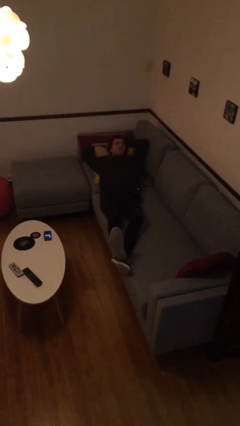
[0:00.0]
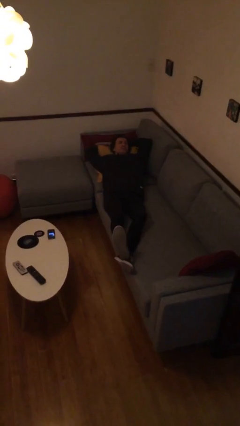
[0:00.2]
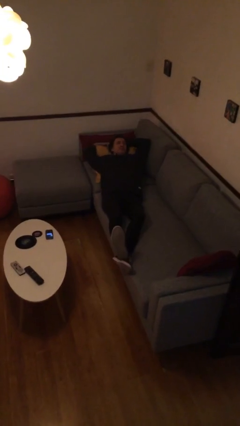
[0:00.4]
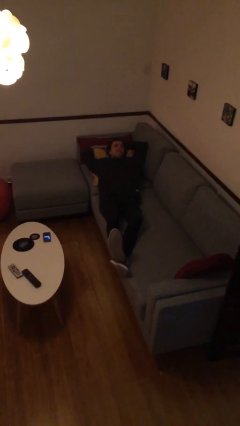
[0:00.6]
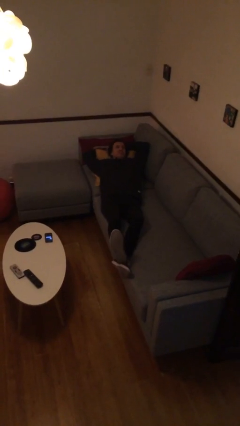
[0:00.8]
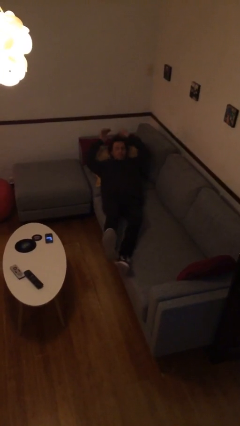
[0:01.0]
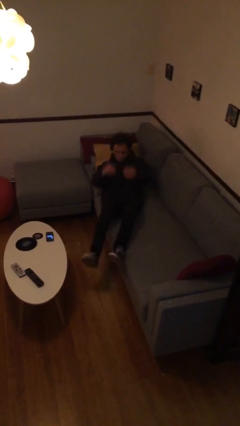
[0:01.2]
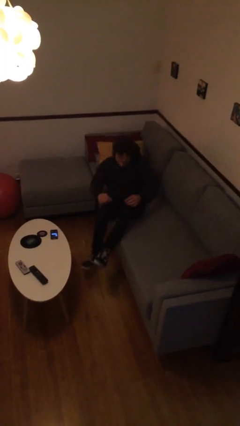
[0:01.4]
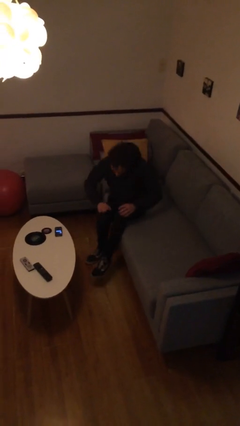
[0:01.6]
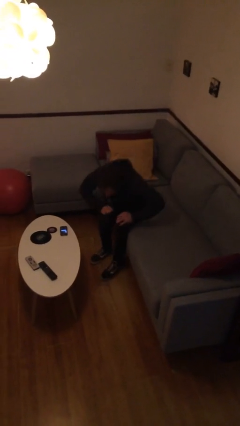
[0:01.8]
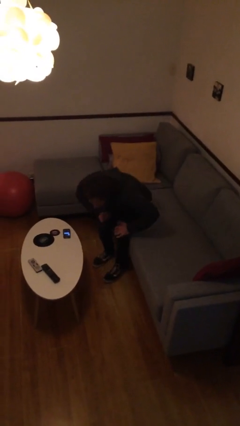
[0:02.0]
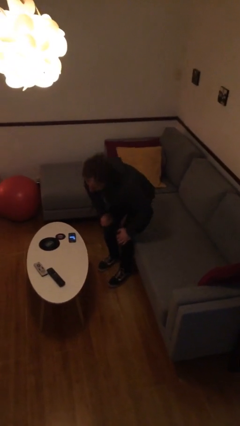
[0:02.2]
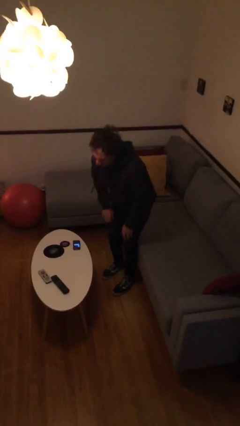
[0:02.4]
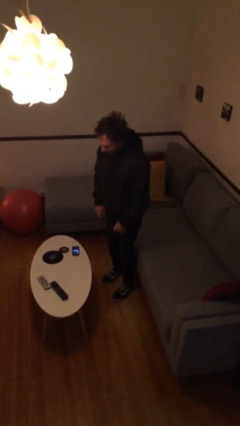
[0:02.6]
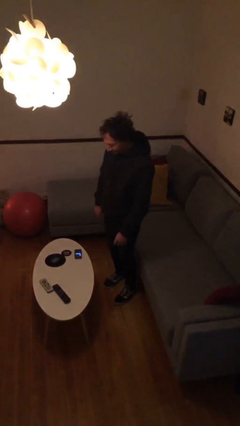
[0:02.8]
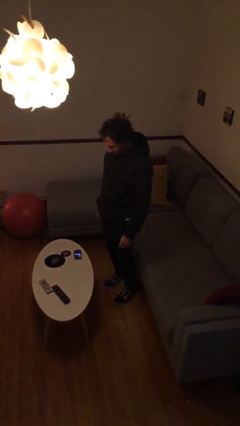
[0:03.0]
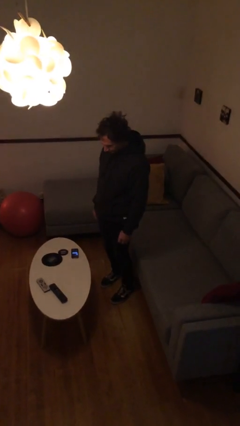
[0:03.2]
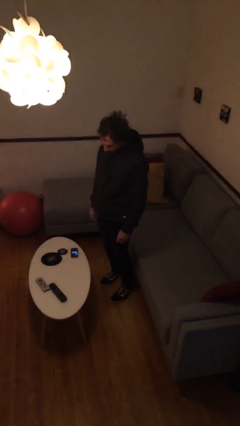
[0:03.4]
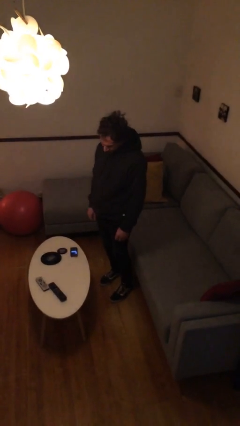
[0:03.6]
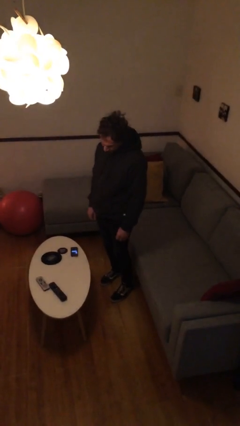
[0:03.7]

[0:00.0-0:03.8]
person stands up

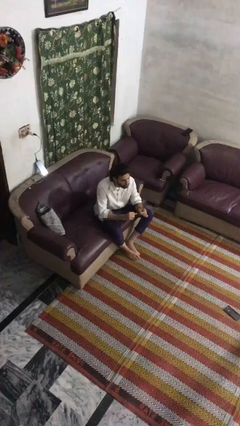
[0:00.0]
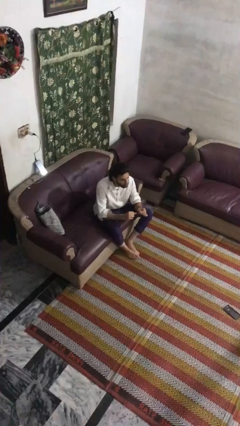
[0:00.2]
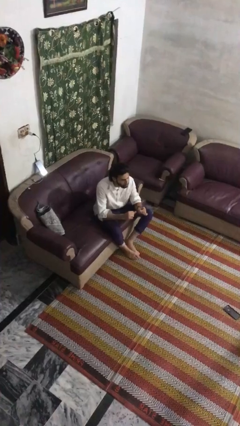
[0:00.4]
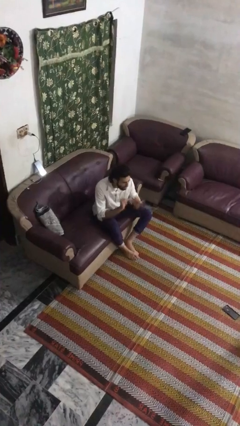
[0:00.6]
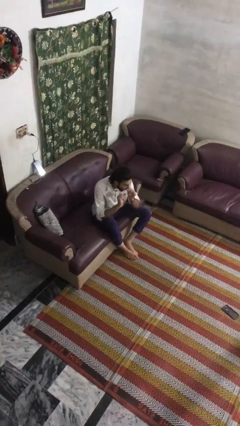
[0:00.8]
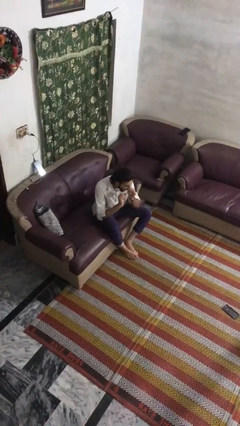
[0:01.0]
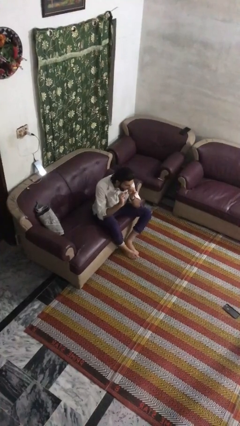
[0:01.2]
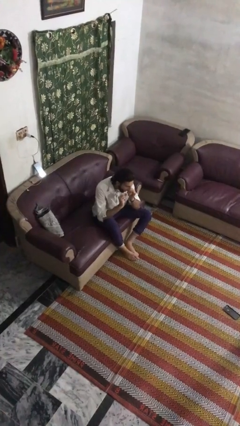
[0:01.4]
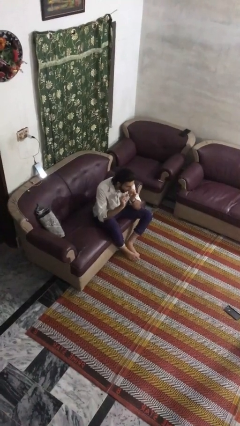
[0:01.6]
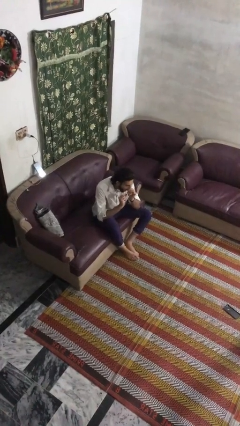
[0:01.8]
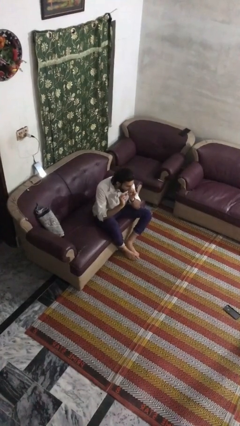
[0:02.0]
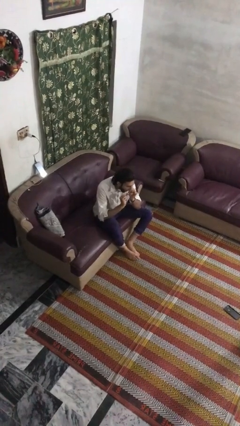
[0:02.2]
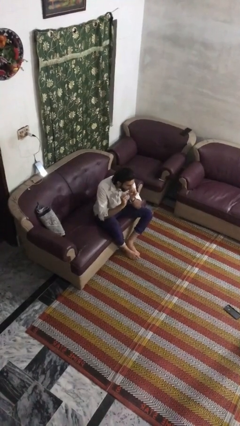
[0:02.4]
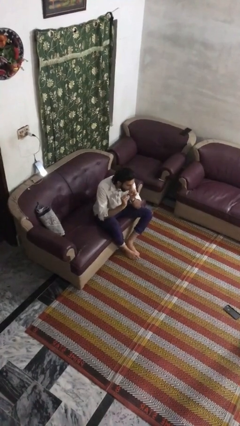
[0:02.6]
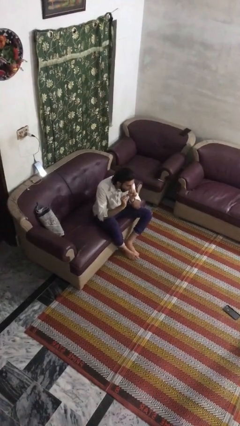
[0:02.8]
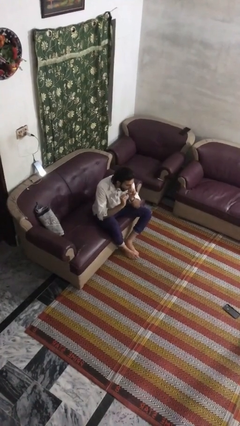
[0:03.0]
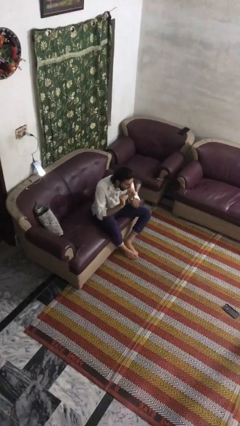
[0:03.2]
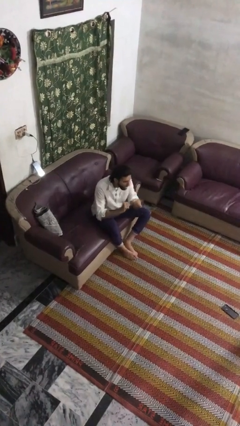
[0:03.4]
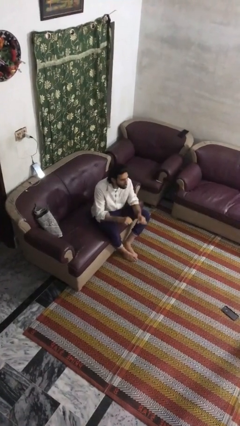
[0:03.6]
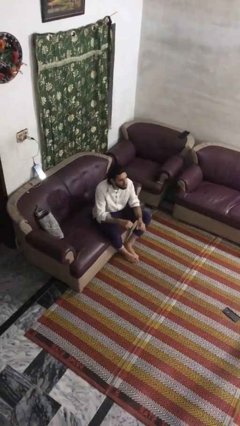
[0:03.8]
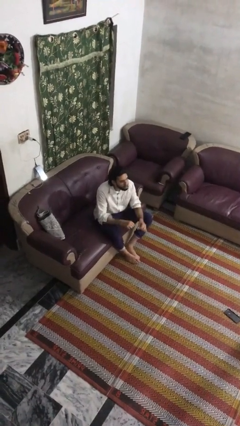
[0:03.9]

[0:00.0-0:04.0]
person flosses

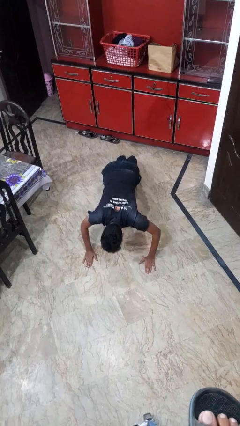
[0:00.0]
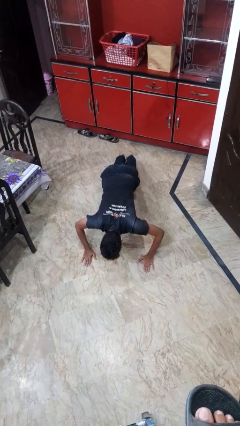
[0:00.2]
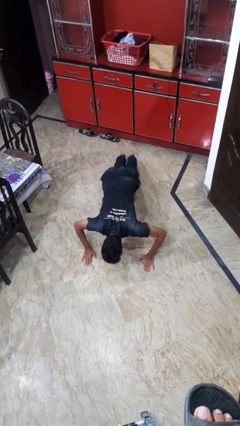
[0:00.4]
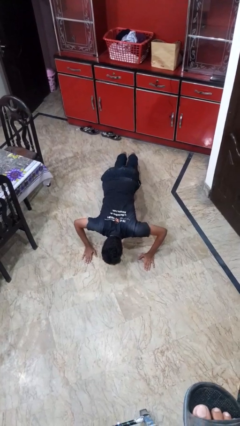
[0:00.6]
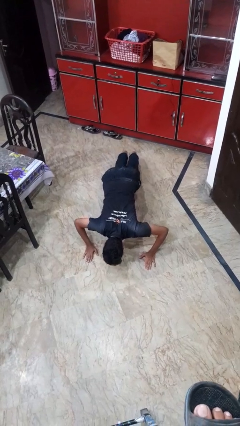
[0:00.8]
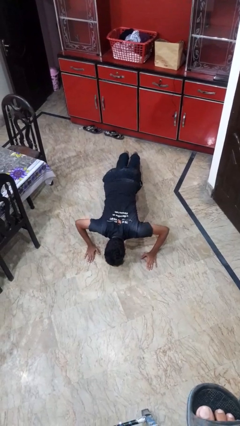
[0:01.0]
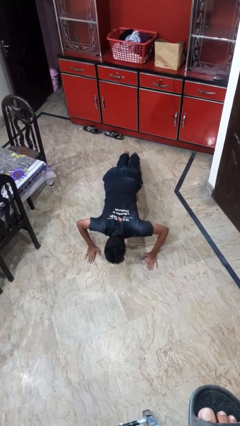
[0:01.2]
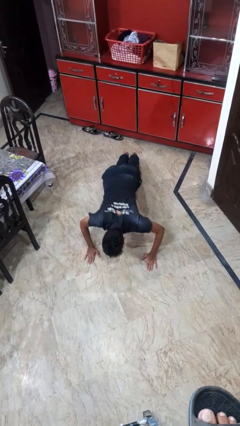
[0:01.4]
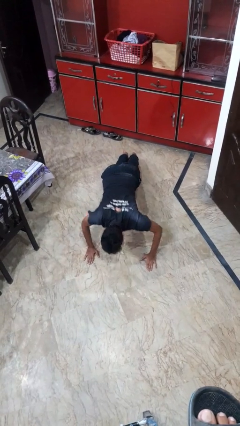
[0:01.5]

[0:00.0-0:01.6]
person exercises with pushup

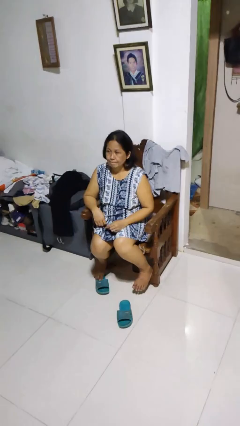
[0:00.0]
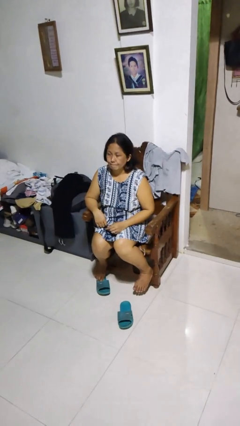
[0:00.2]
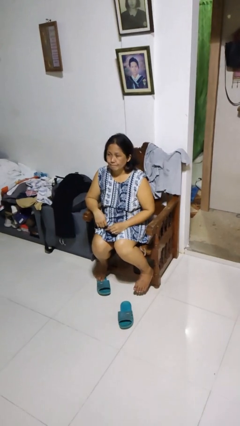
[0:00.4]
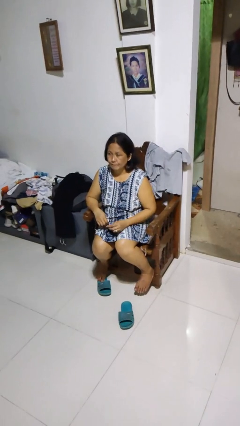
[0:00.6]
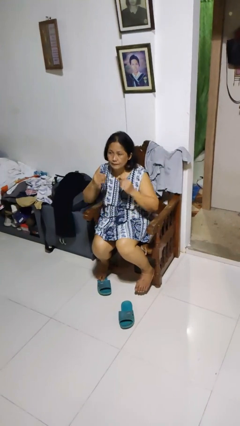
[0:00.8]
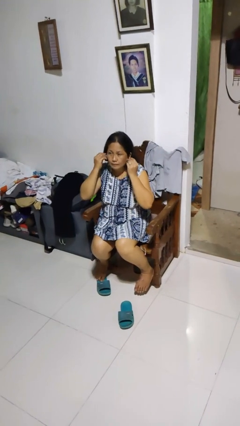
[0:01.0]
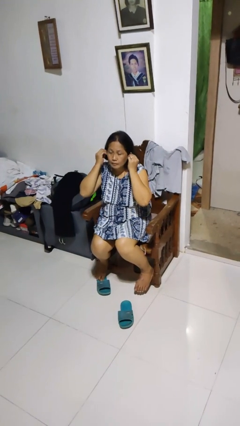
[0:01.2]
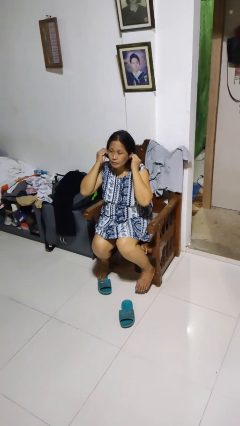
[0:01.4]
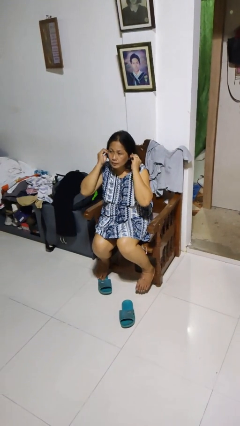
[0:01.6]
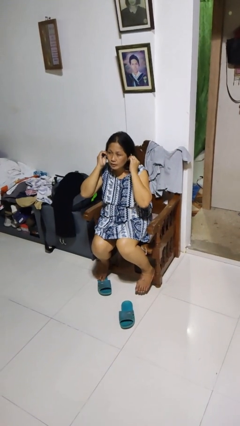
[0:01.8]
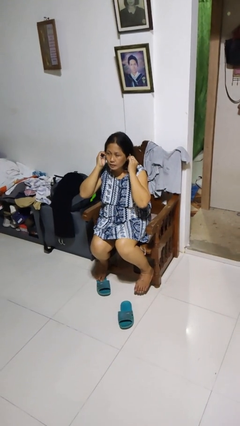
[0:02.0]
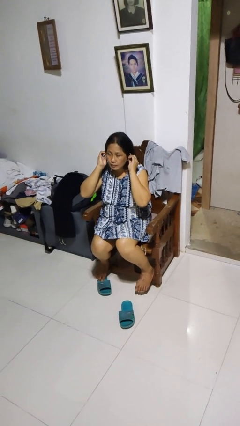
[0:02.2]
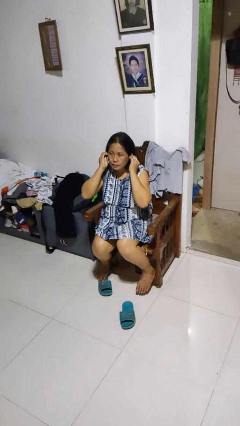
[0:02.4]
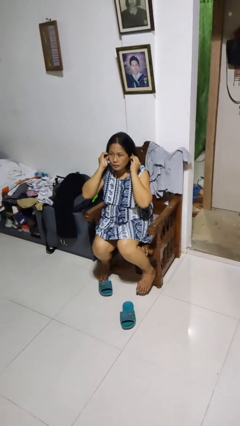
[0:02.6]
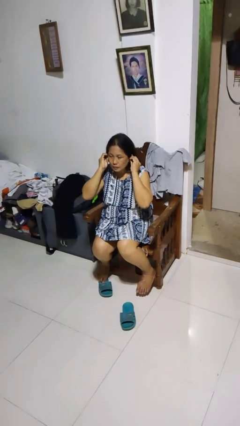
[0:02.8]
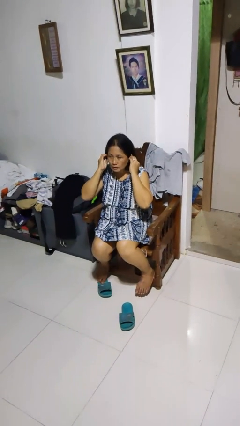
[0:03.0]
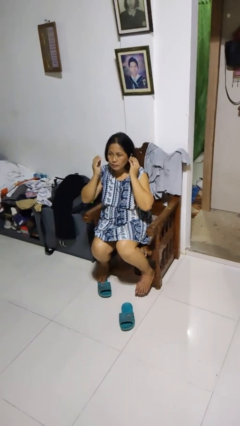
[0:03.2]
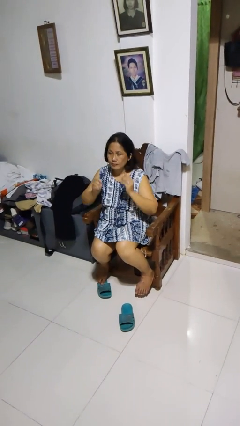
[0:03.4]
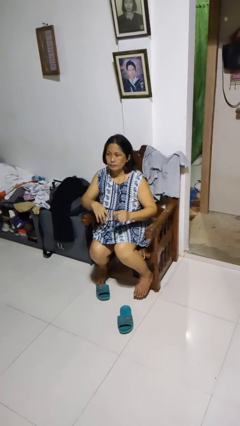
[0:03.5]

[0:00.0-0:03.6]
person puts on headphones

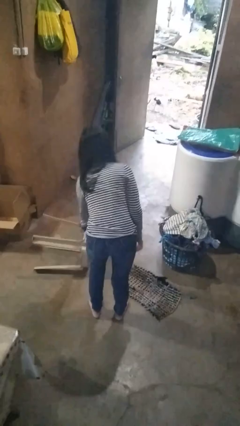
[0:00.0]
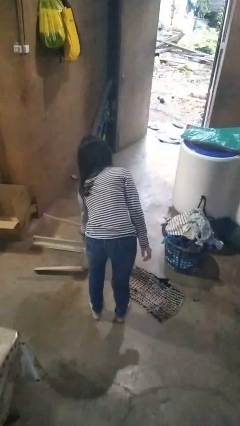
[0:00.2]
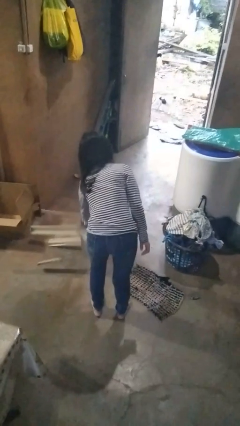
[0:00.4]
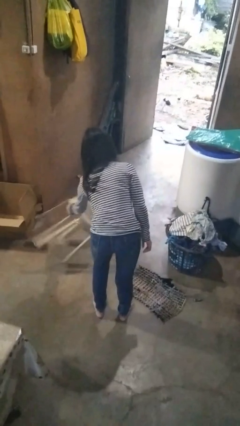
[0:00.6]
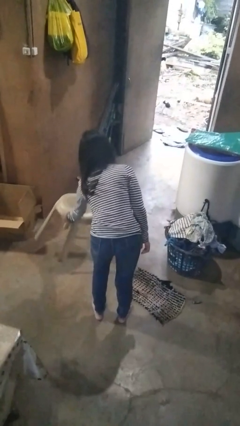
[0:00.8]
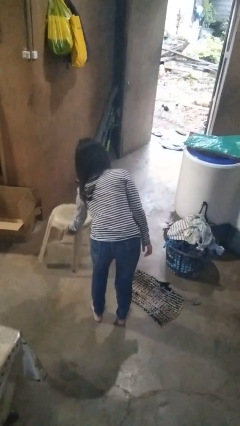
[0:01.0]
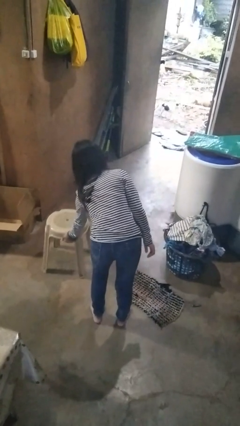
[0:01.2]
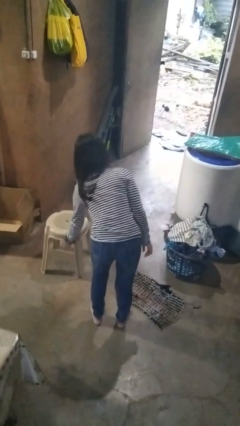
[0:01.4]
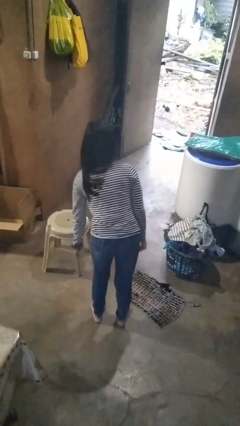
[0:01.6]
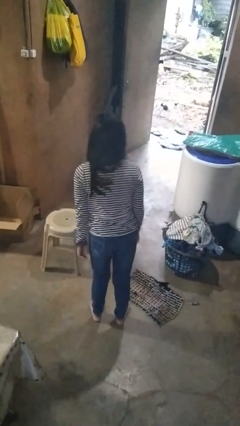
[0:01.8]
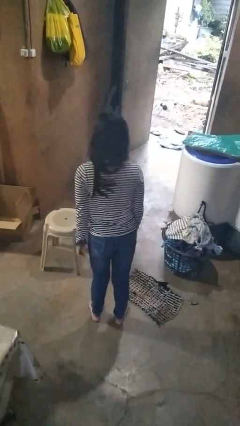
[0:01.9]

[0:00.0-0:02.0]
person sets upright furniture

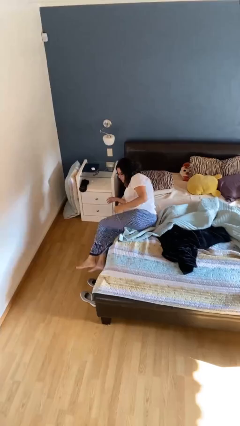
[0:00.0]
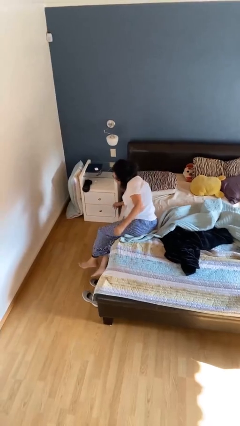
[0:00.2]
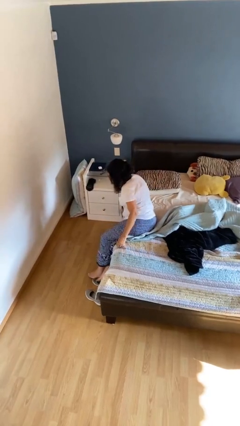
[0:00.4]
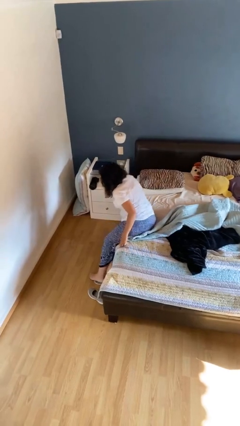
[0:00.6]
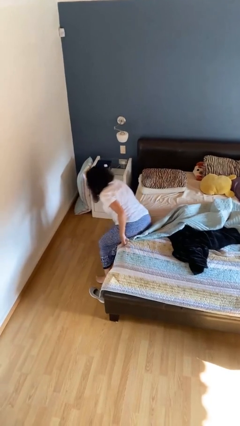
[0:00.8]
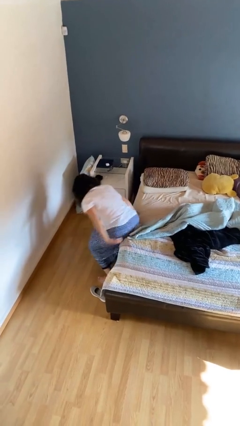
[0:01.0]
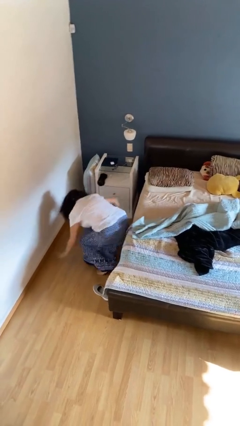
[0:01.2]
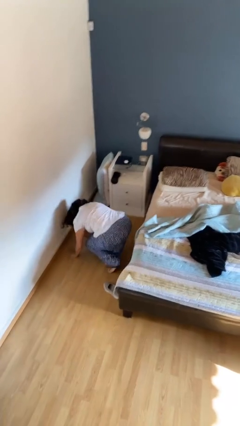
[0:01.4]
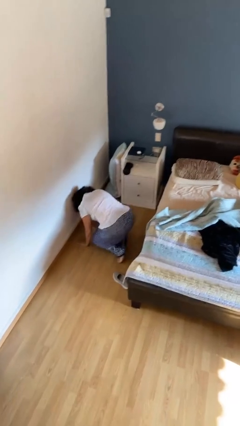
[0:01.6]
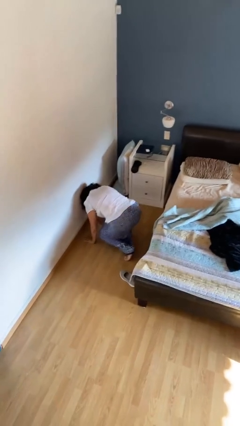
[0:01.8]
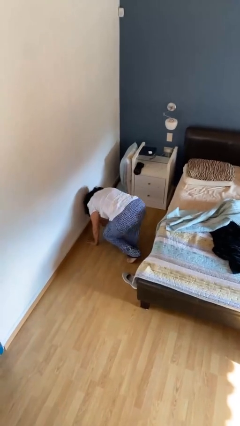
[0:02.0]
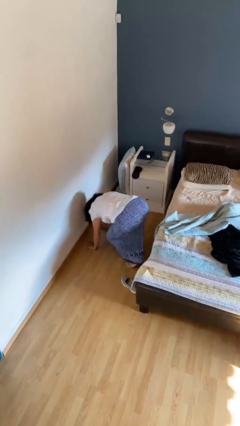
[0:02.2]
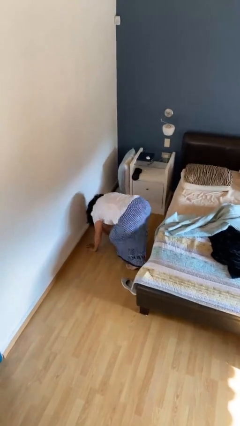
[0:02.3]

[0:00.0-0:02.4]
person falls from bed
